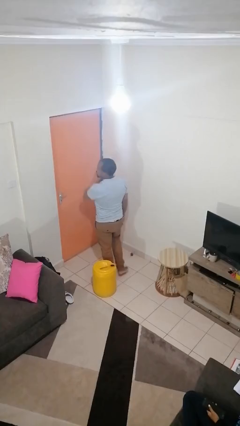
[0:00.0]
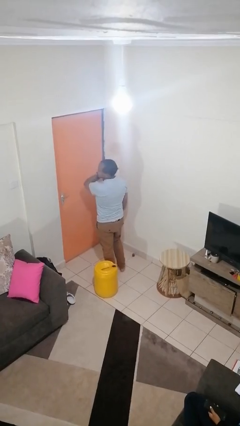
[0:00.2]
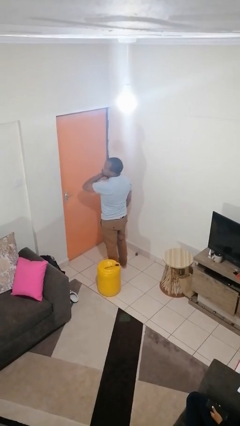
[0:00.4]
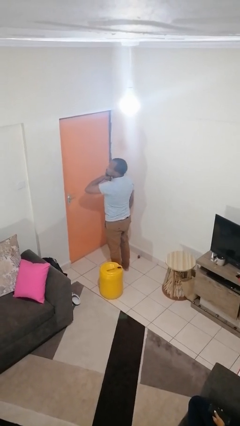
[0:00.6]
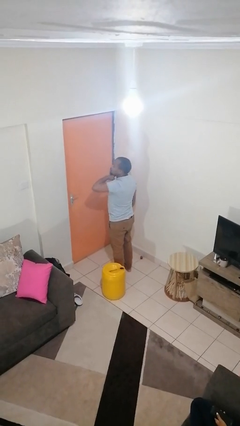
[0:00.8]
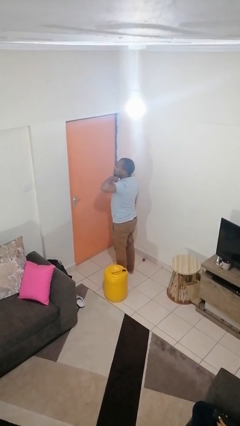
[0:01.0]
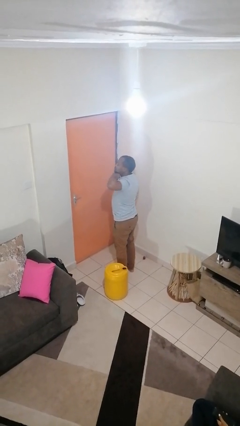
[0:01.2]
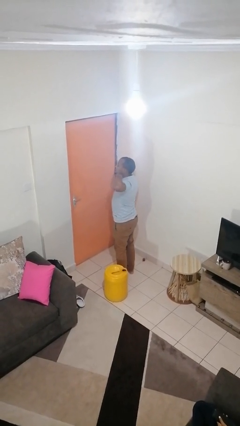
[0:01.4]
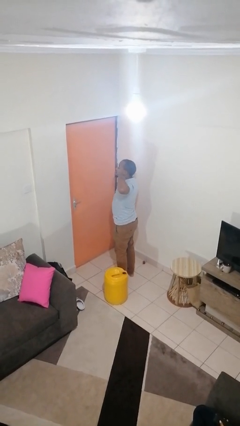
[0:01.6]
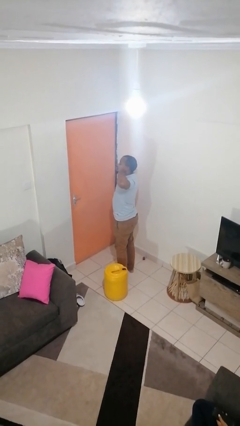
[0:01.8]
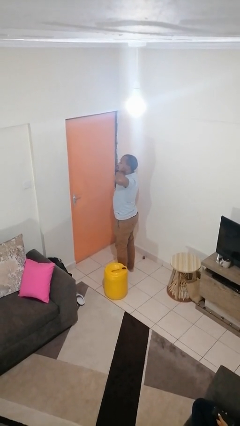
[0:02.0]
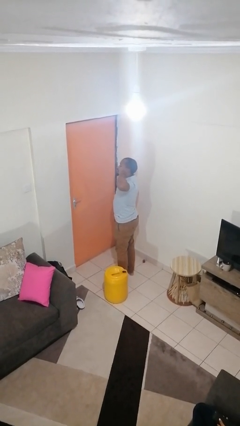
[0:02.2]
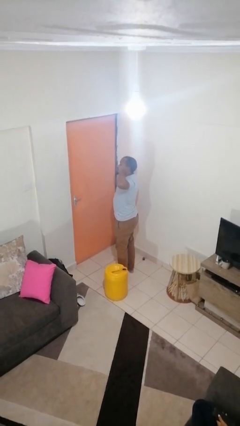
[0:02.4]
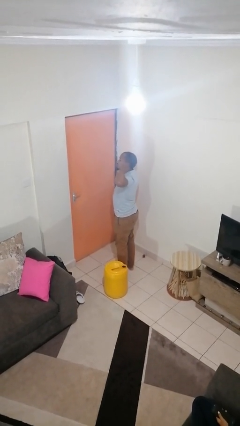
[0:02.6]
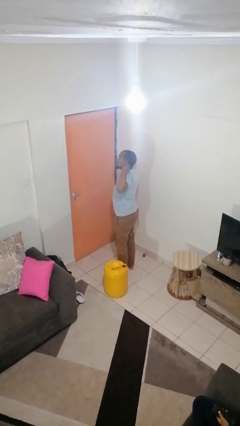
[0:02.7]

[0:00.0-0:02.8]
person gestures cut

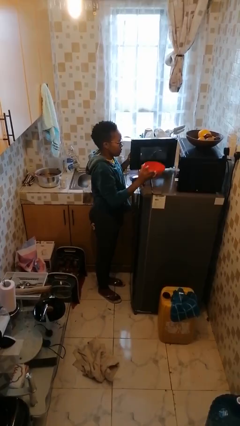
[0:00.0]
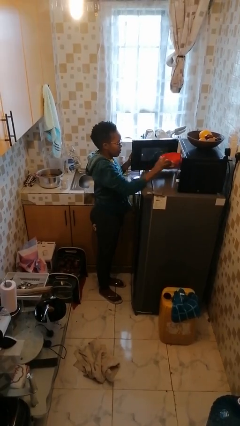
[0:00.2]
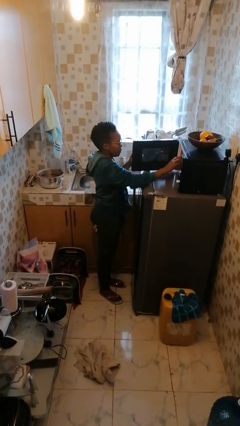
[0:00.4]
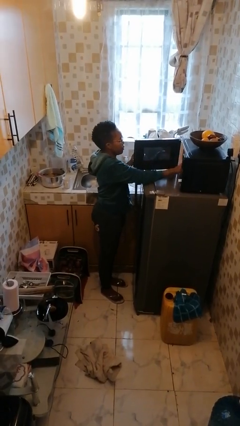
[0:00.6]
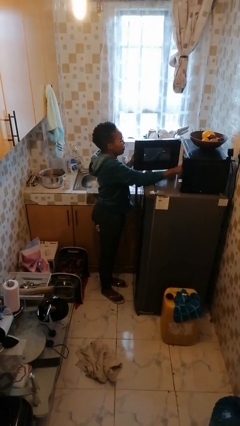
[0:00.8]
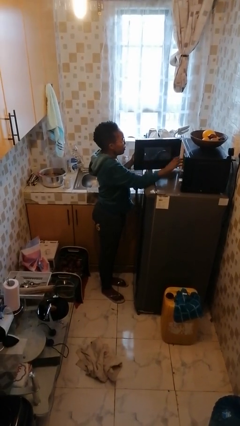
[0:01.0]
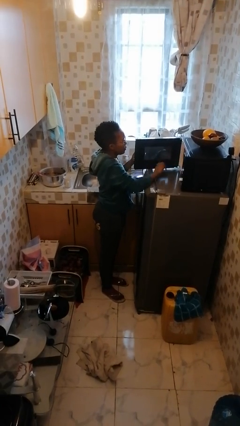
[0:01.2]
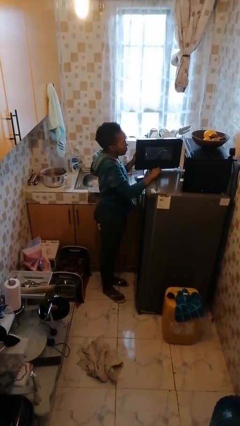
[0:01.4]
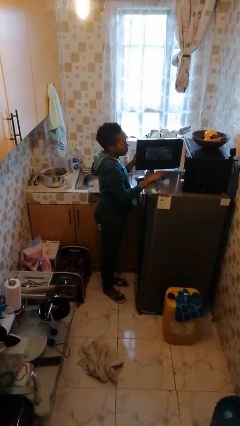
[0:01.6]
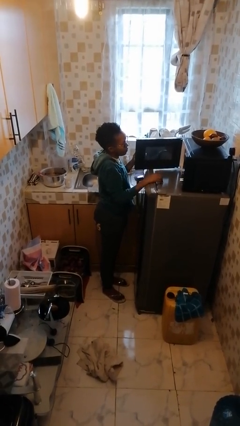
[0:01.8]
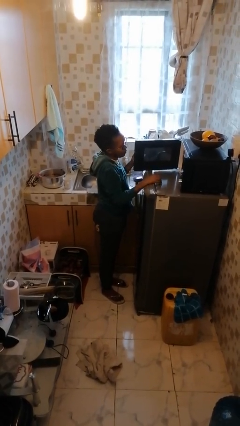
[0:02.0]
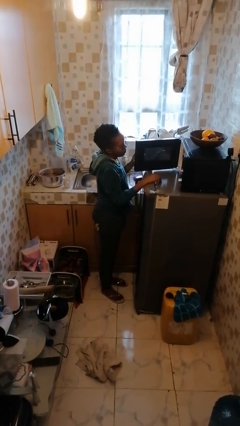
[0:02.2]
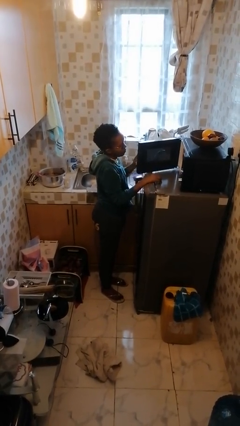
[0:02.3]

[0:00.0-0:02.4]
person puts object into microwave

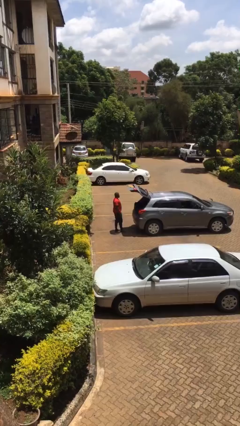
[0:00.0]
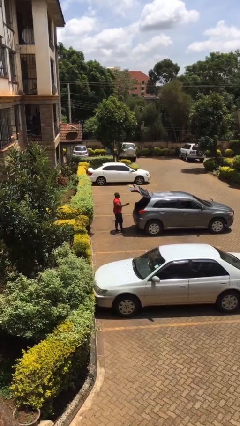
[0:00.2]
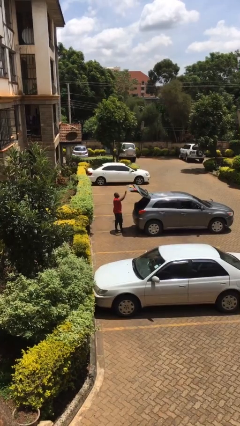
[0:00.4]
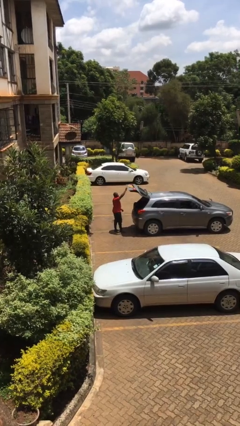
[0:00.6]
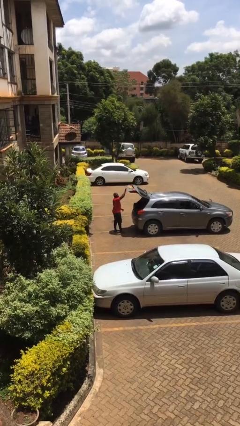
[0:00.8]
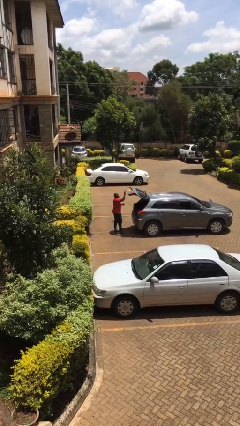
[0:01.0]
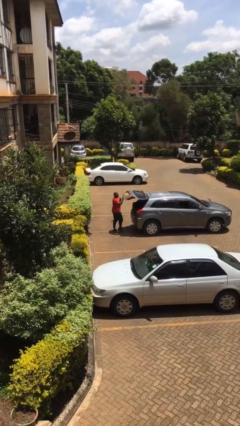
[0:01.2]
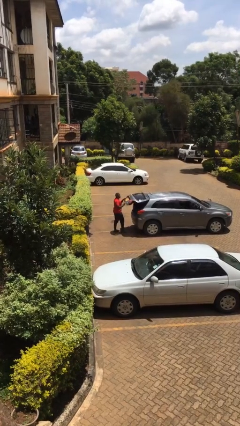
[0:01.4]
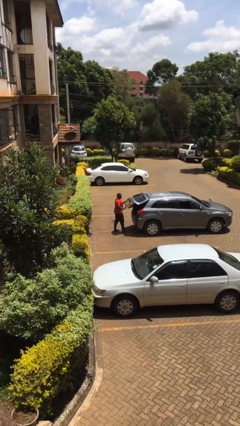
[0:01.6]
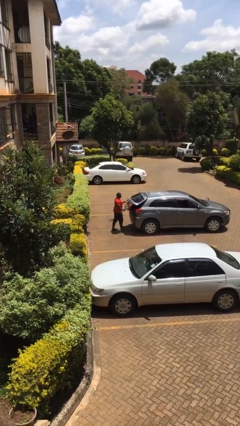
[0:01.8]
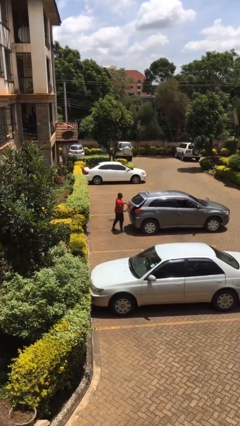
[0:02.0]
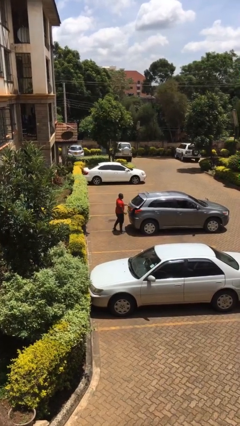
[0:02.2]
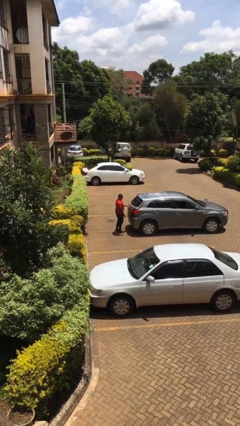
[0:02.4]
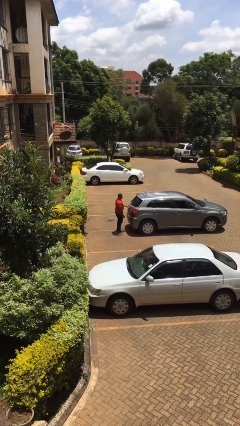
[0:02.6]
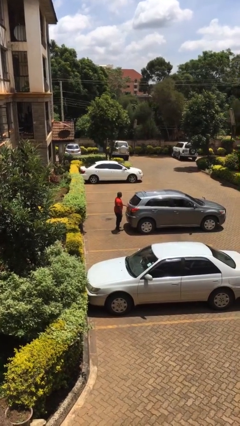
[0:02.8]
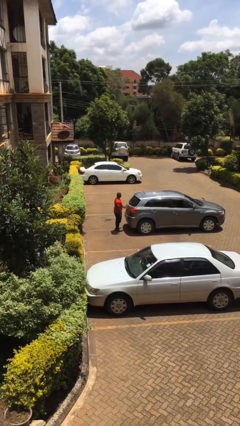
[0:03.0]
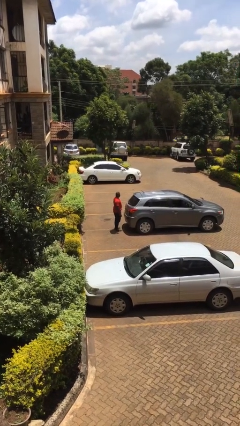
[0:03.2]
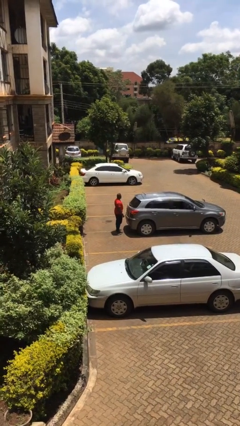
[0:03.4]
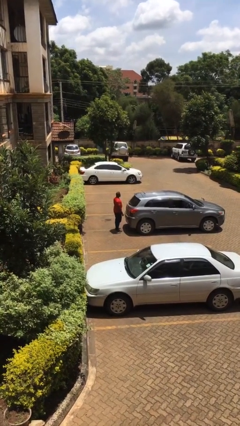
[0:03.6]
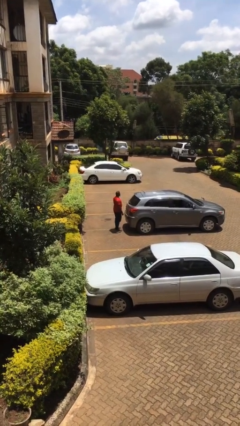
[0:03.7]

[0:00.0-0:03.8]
person closes car trunk

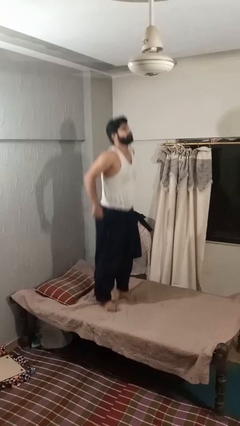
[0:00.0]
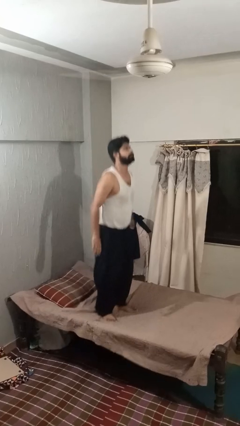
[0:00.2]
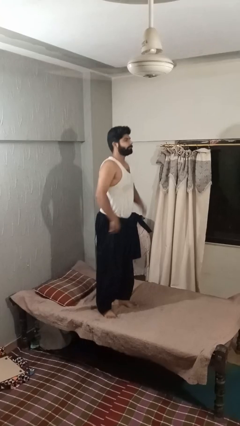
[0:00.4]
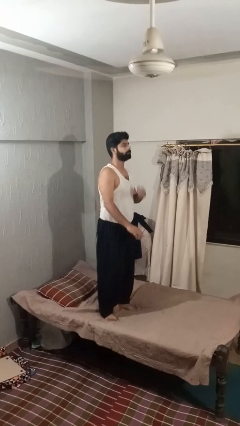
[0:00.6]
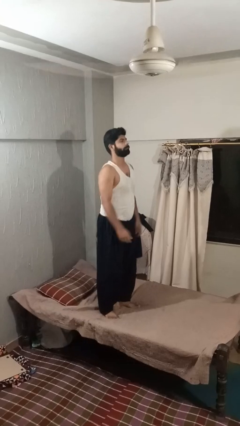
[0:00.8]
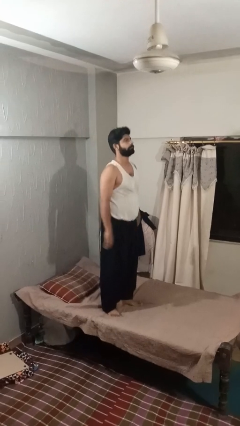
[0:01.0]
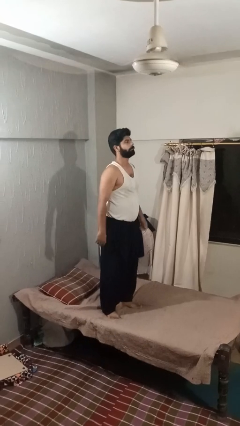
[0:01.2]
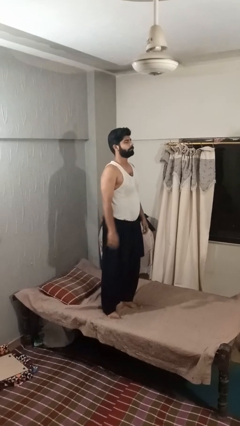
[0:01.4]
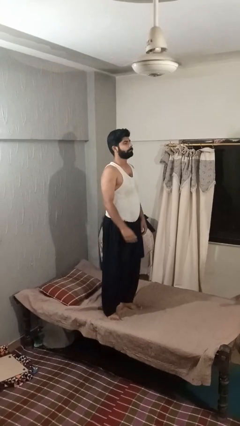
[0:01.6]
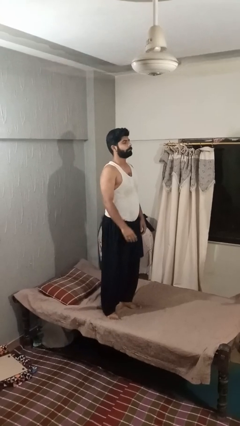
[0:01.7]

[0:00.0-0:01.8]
person jumps on bed

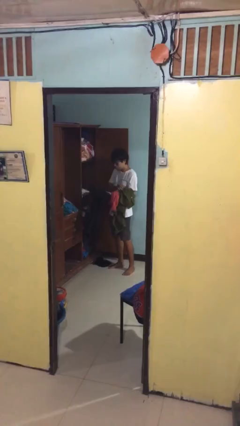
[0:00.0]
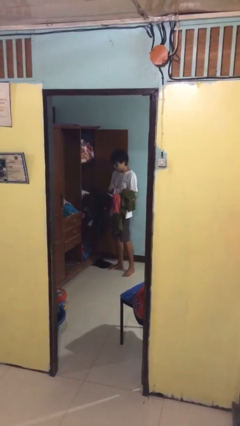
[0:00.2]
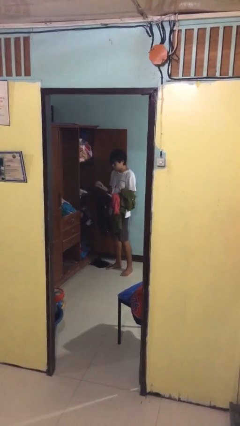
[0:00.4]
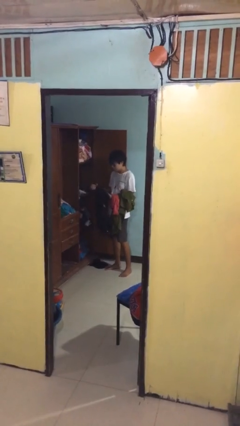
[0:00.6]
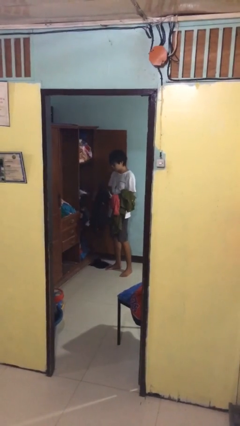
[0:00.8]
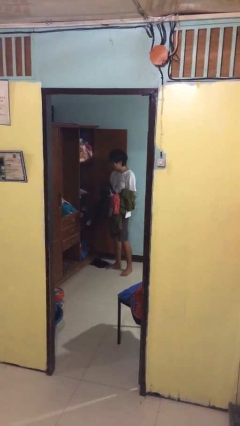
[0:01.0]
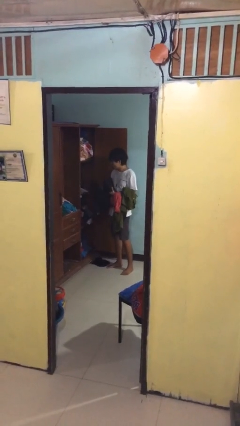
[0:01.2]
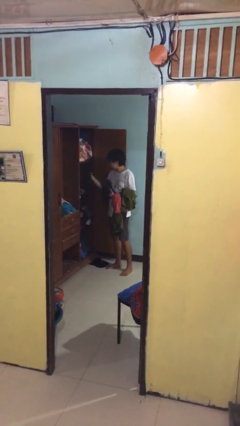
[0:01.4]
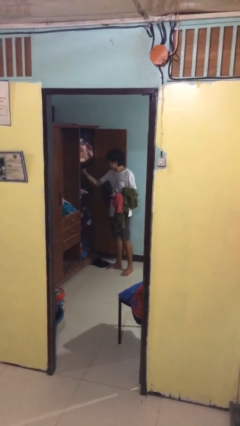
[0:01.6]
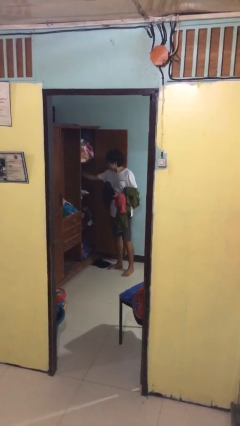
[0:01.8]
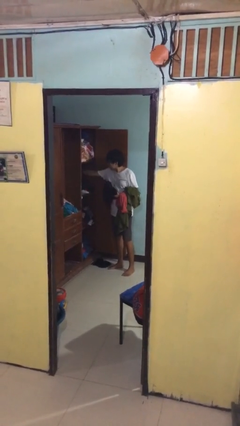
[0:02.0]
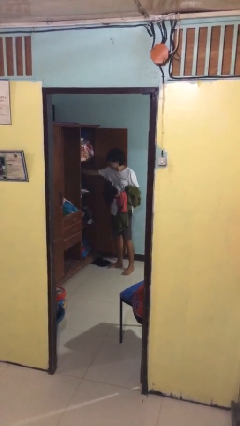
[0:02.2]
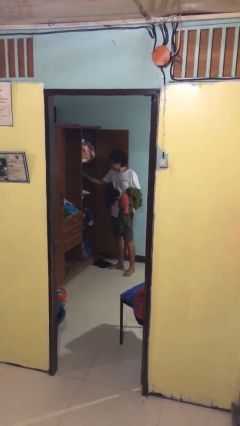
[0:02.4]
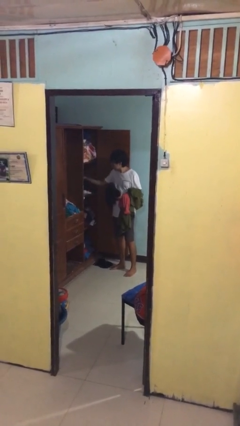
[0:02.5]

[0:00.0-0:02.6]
person puts clothes into dresser

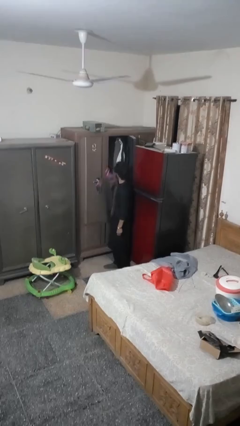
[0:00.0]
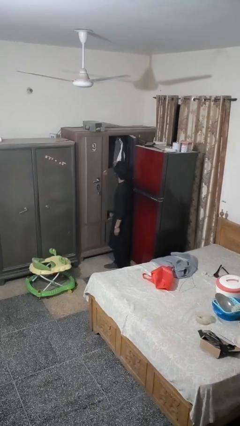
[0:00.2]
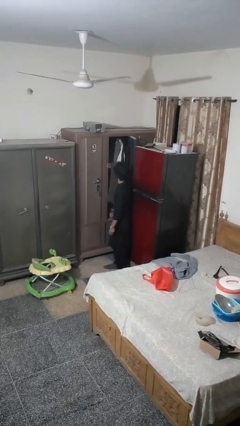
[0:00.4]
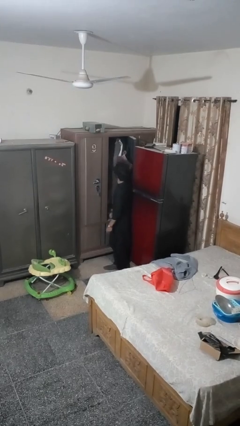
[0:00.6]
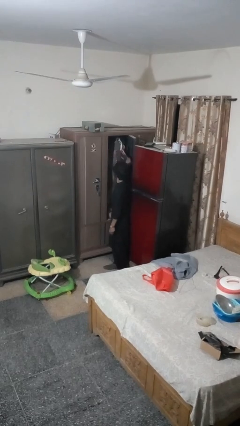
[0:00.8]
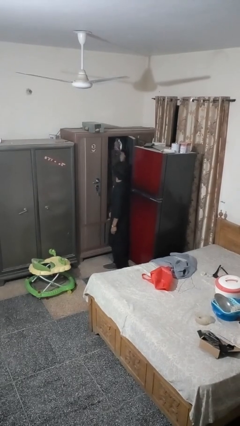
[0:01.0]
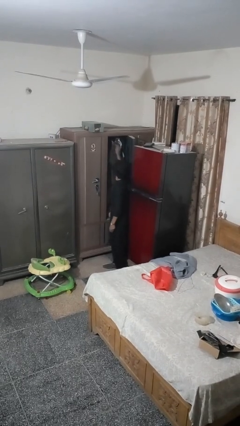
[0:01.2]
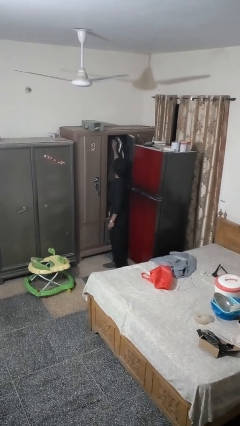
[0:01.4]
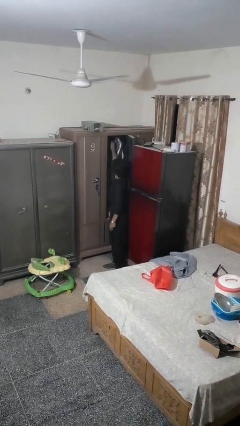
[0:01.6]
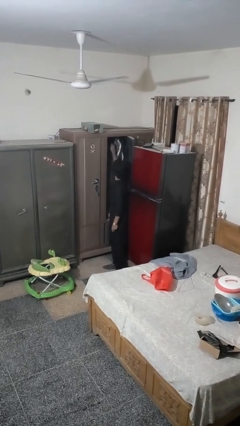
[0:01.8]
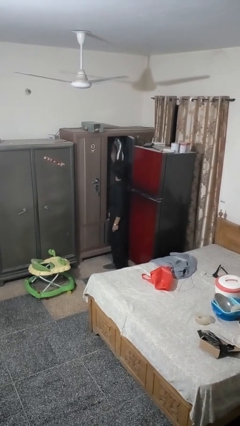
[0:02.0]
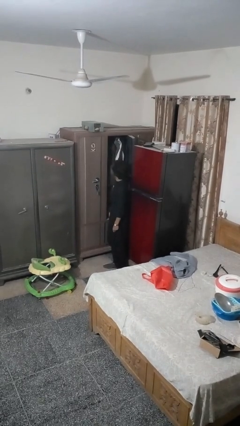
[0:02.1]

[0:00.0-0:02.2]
person puts clothes into closet

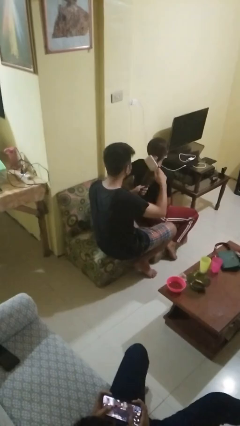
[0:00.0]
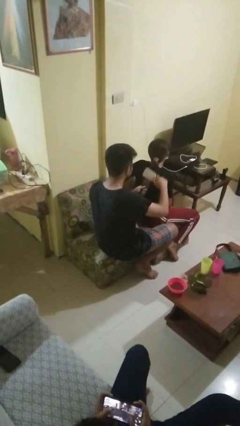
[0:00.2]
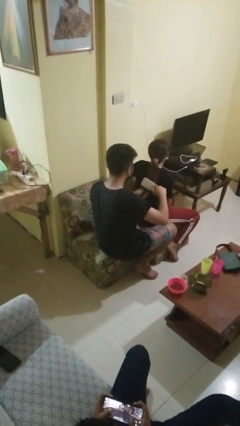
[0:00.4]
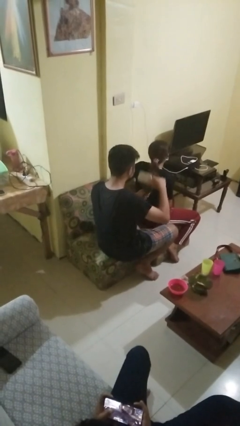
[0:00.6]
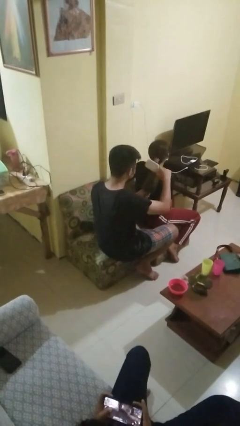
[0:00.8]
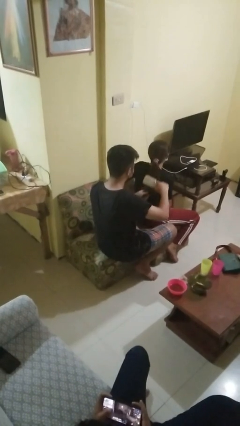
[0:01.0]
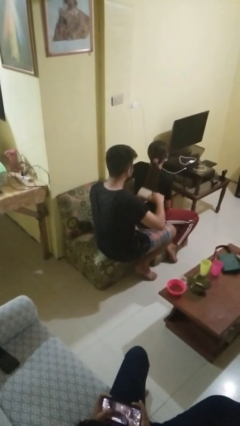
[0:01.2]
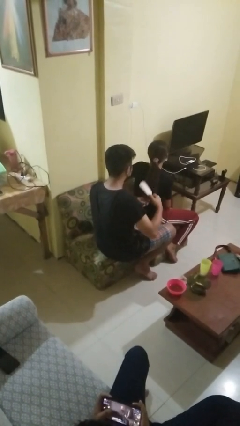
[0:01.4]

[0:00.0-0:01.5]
person brushes hair of person
